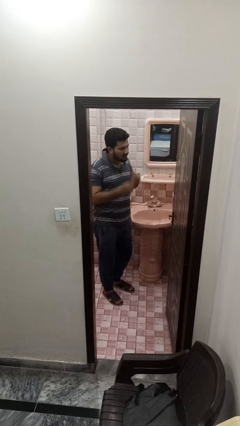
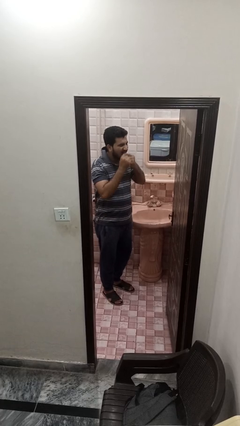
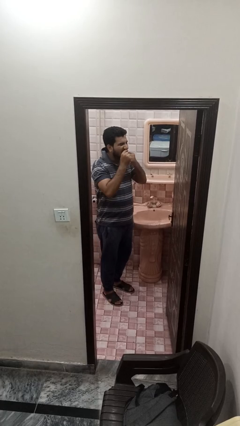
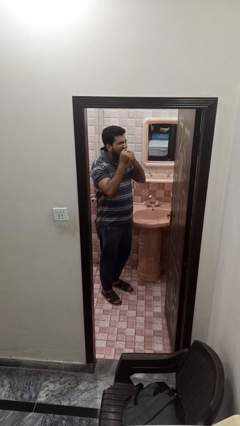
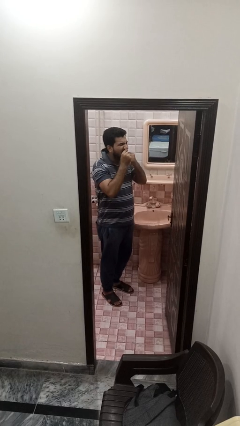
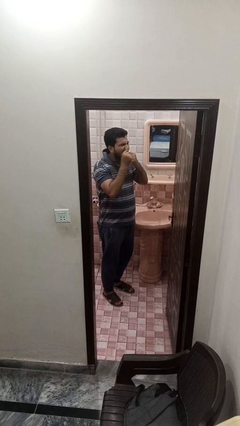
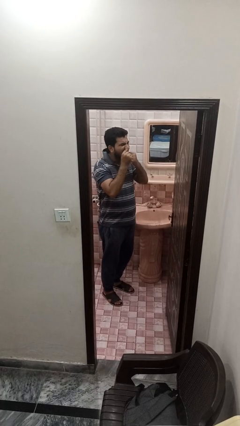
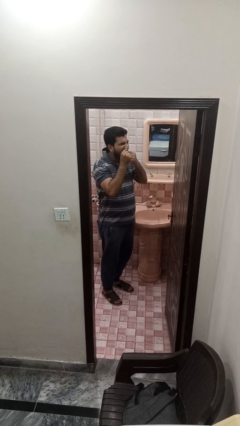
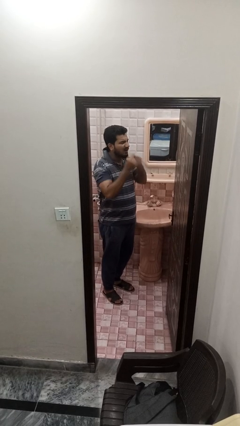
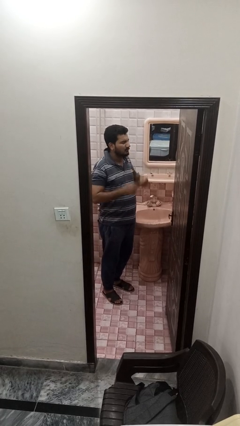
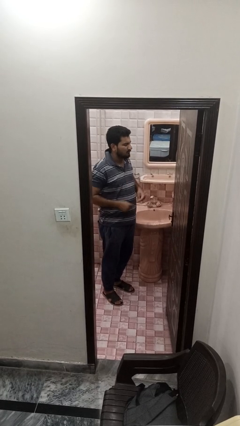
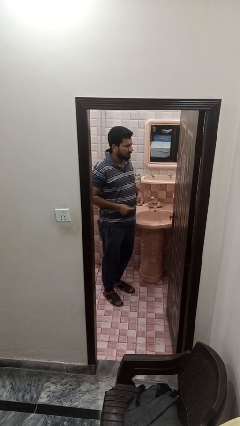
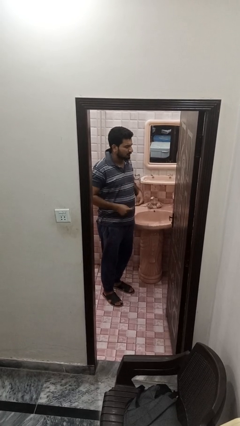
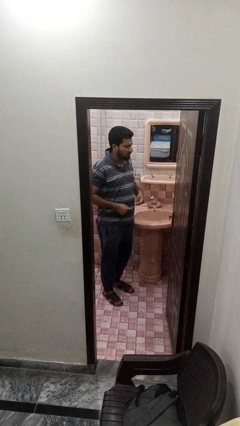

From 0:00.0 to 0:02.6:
person flosses

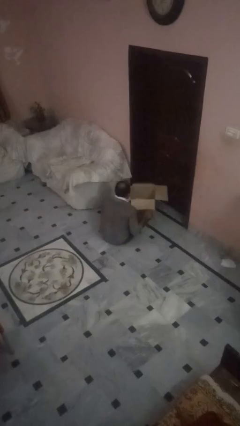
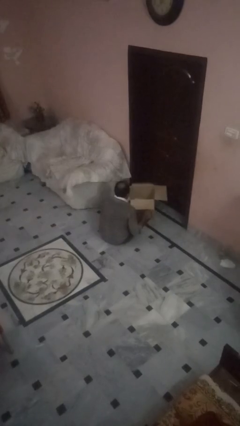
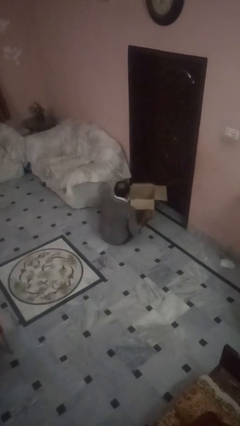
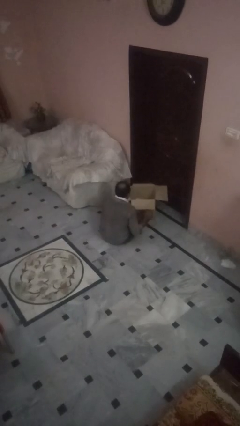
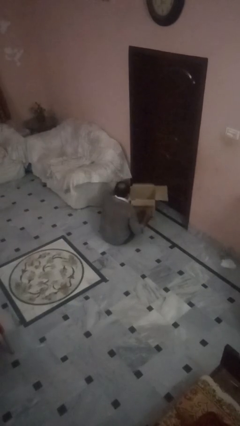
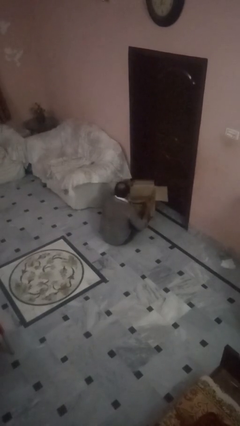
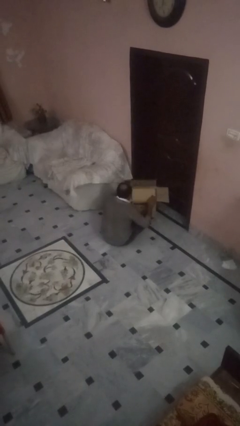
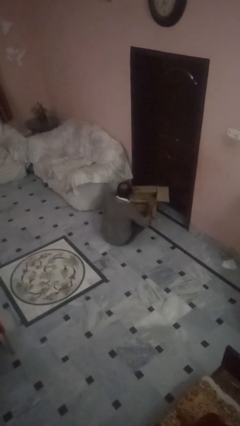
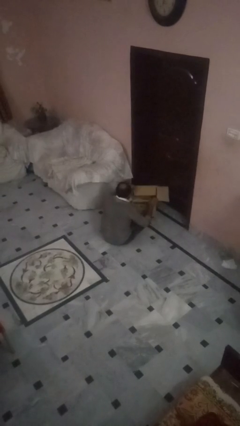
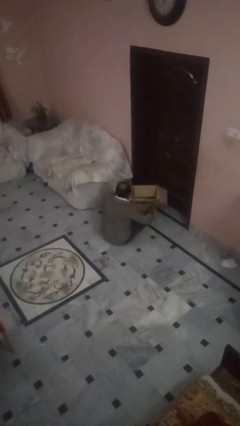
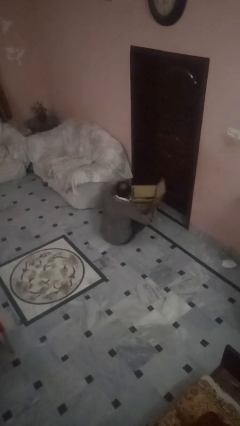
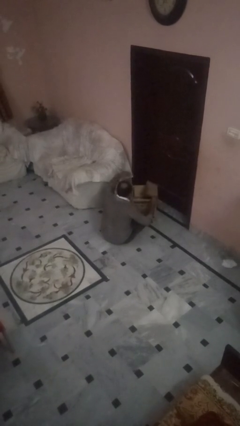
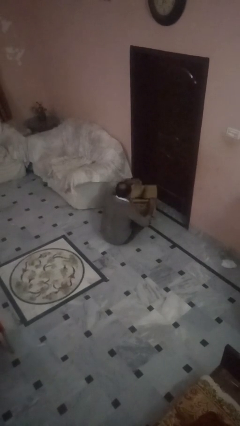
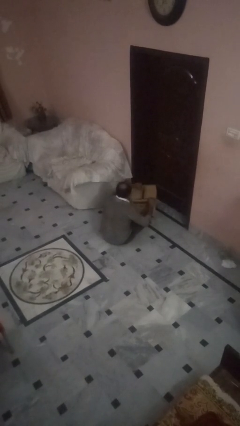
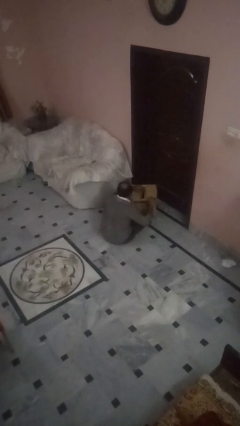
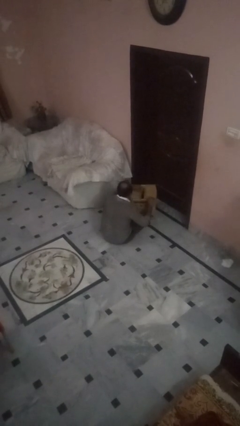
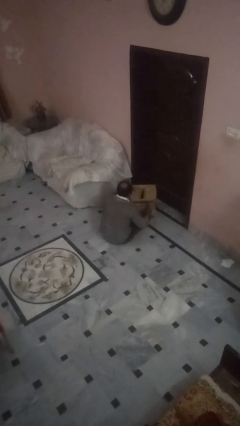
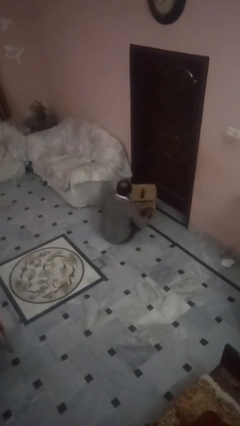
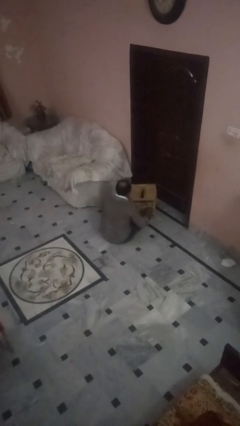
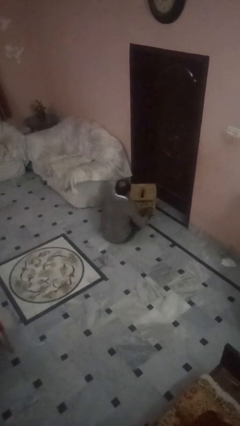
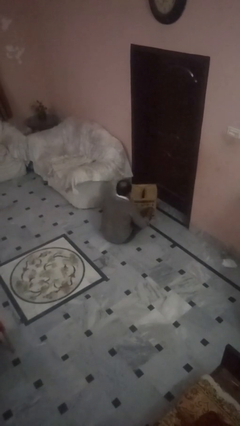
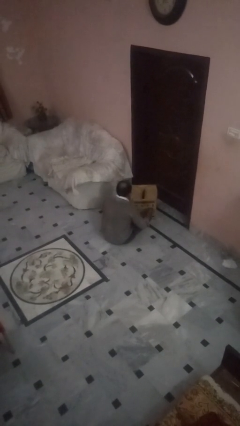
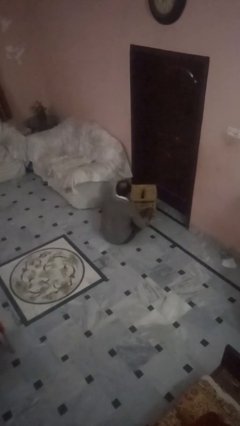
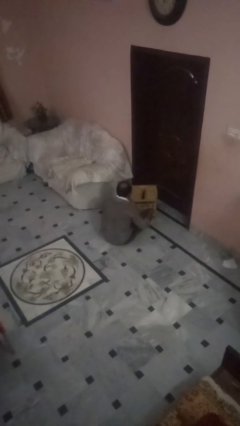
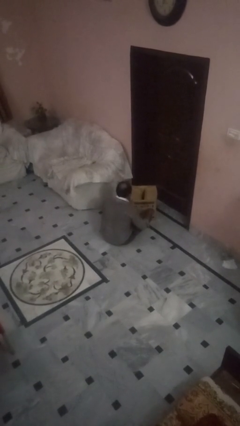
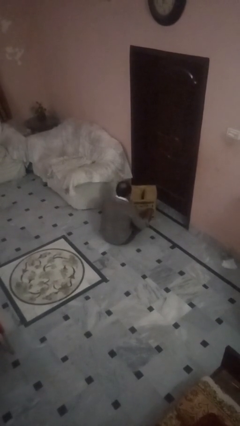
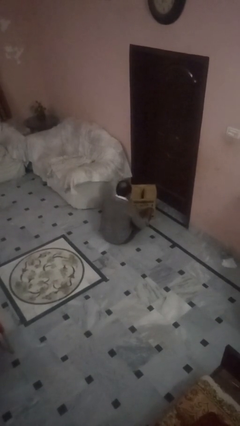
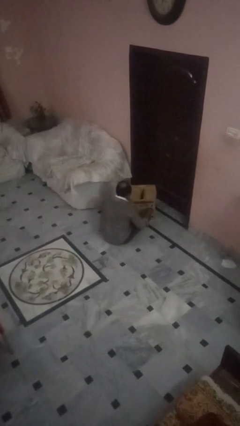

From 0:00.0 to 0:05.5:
person closes box

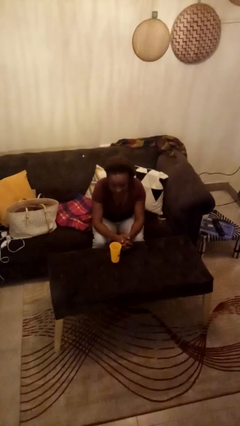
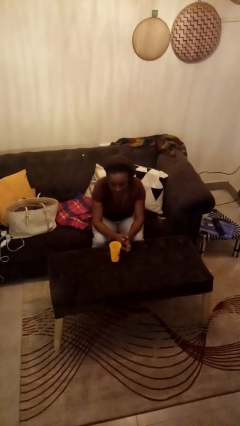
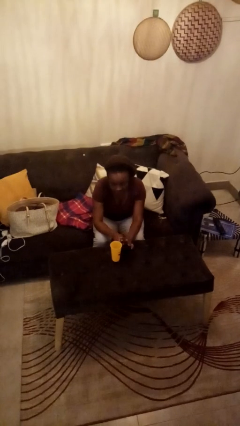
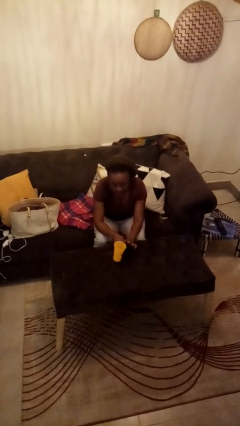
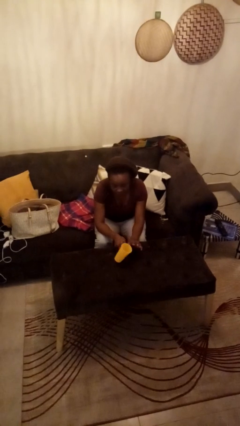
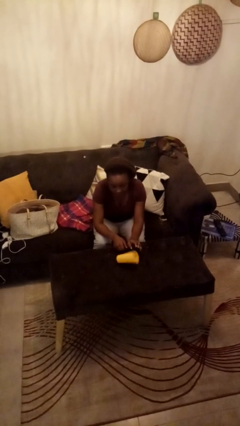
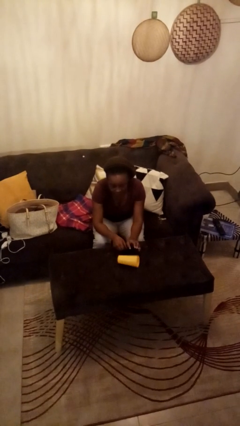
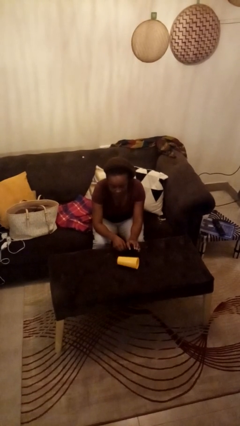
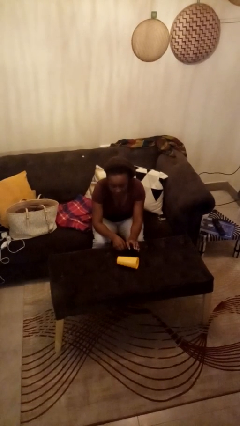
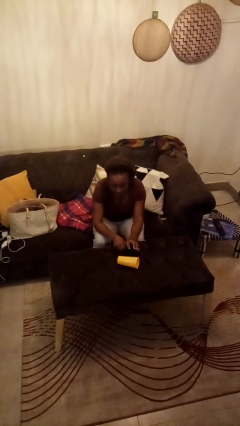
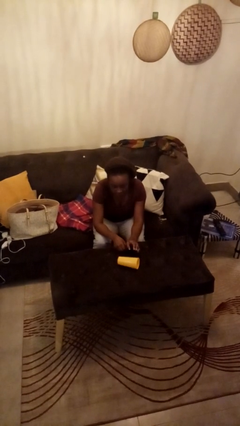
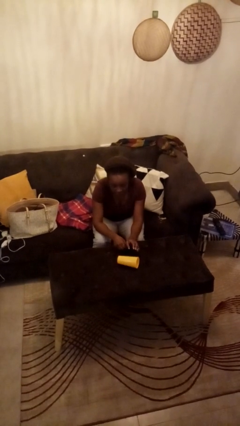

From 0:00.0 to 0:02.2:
person knocks over glass

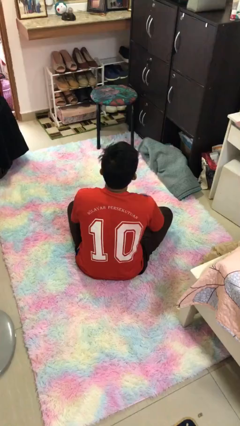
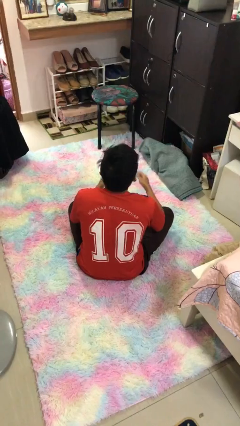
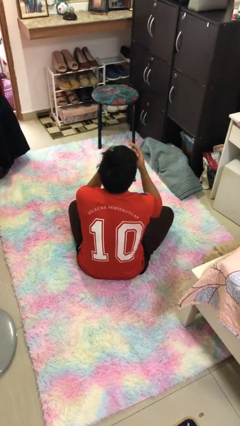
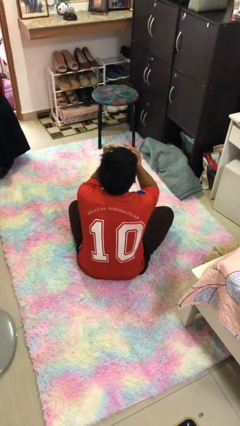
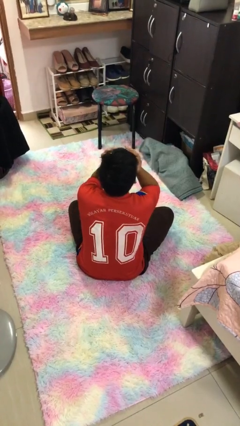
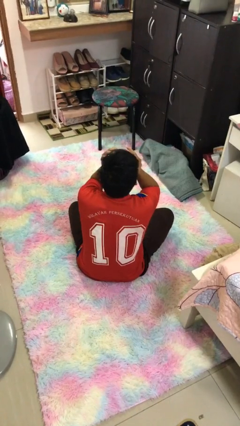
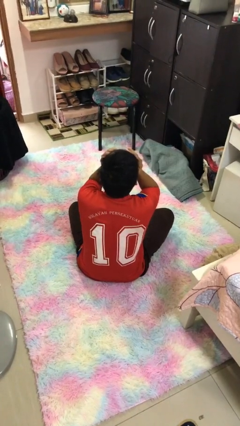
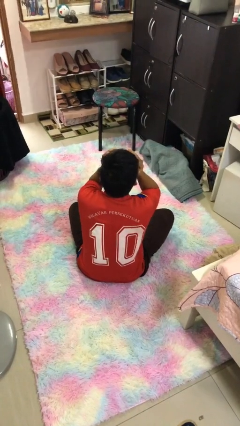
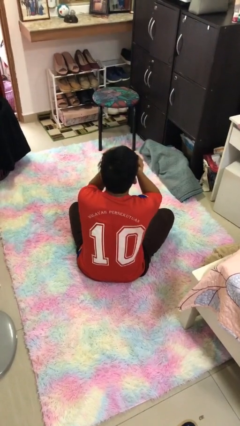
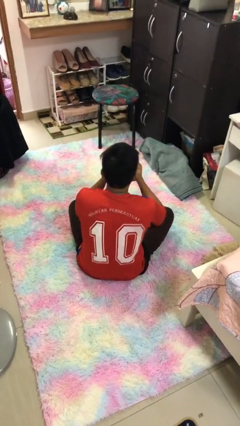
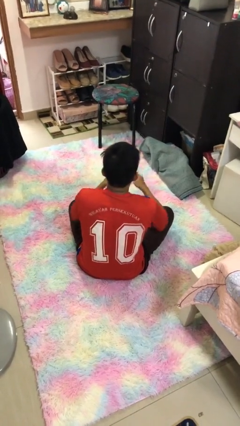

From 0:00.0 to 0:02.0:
person covers face with hands

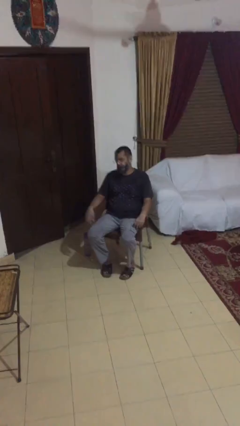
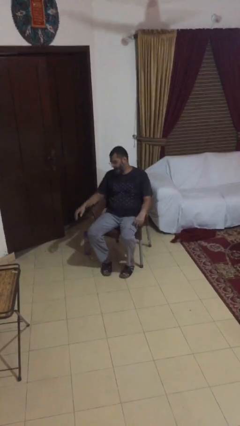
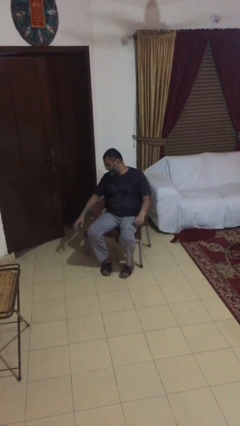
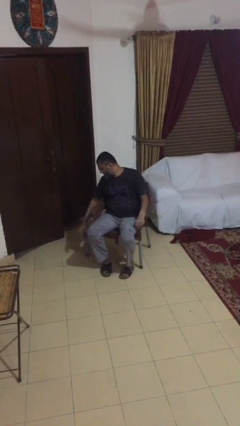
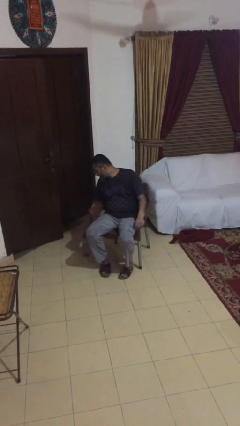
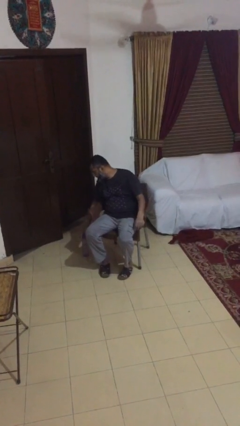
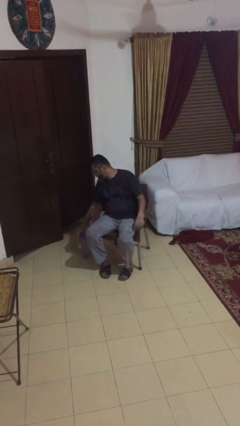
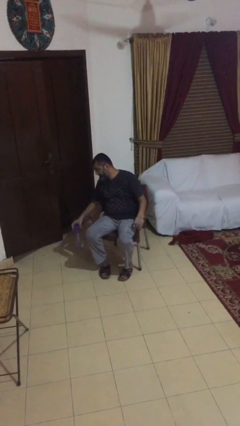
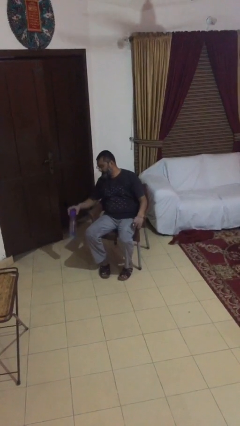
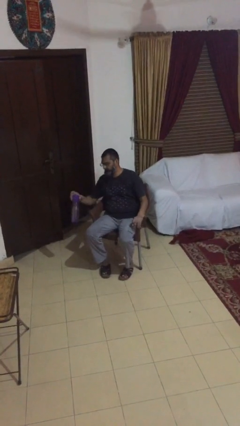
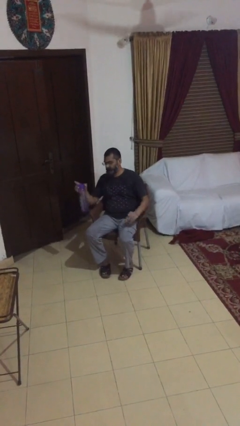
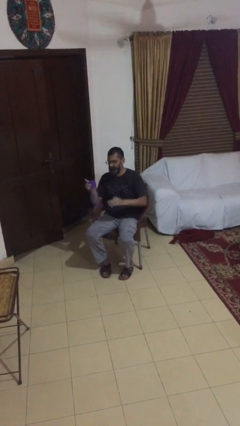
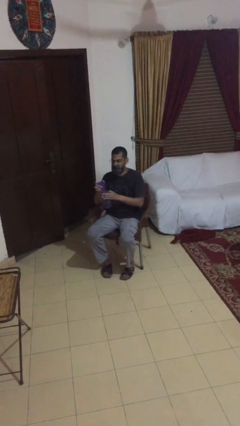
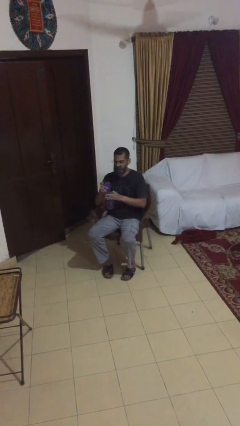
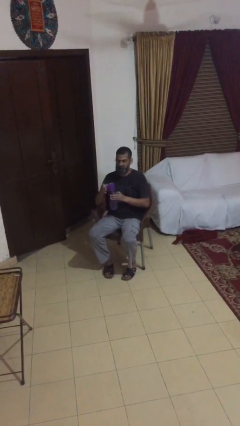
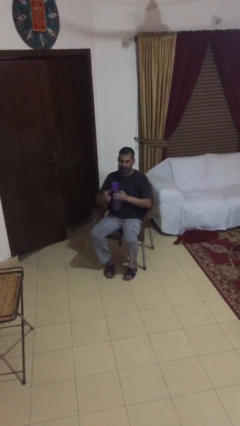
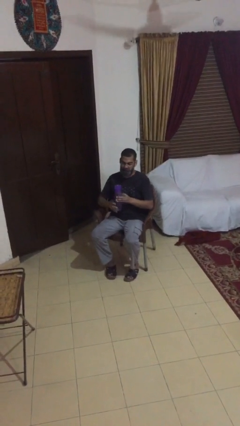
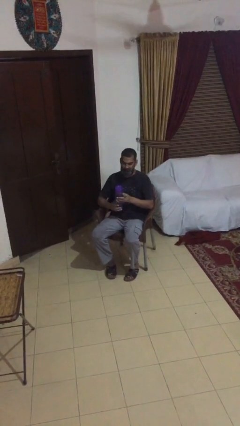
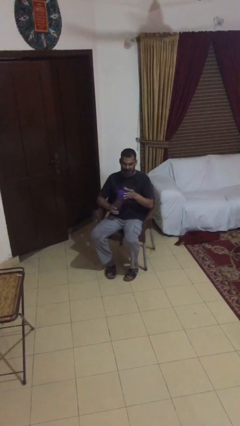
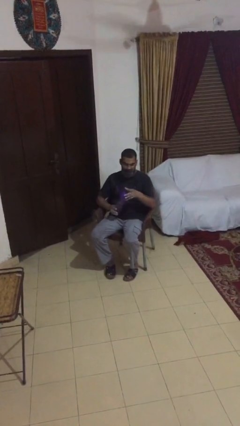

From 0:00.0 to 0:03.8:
person picks up object from floor

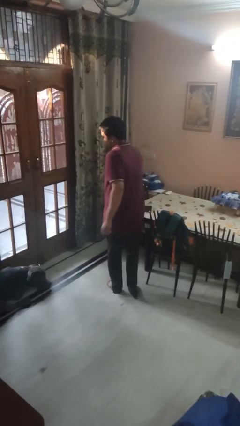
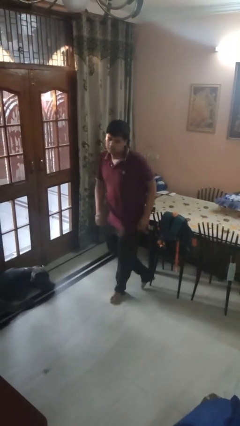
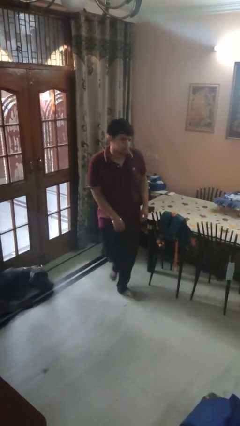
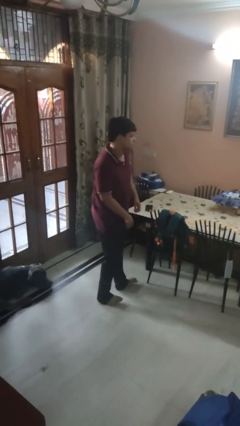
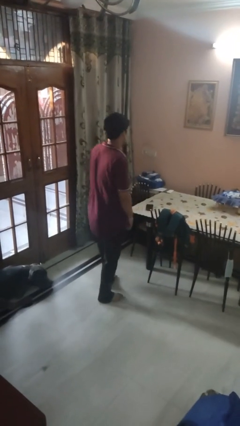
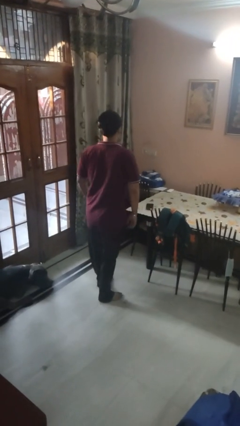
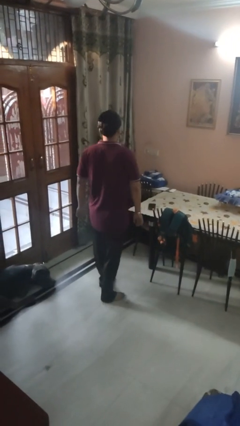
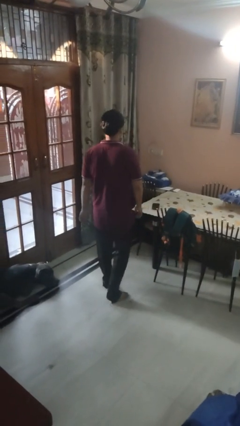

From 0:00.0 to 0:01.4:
person twirls
